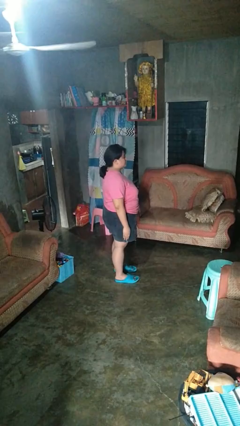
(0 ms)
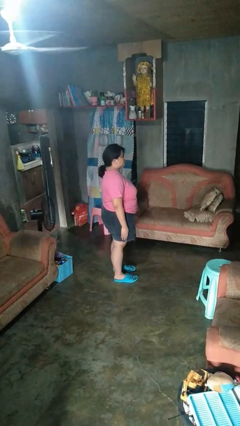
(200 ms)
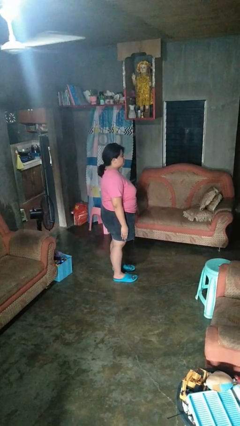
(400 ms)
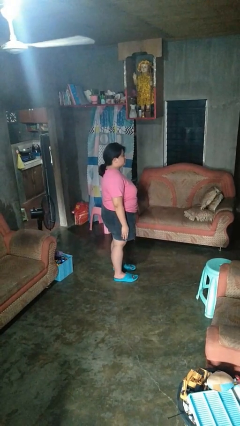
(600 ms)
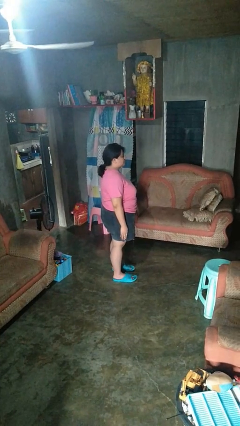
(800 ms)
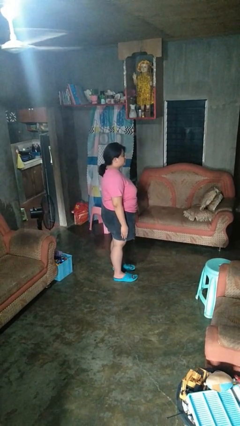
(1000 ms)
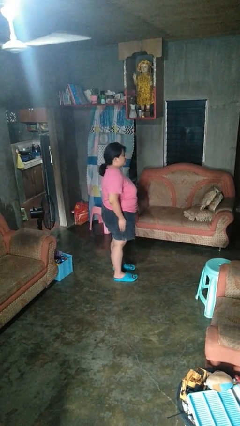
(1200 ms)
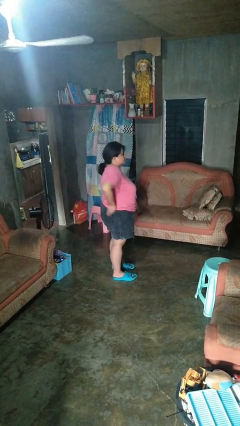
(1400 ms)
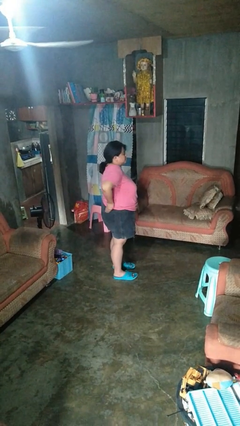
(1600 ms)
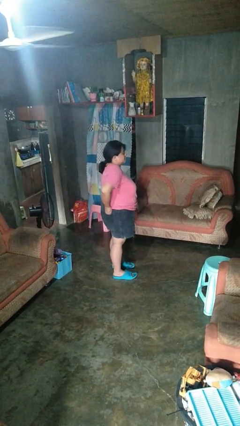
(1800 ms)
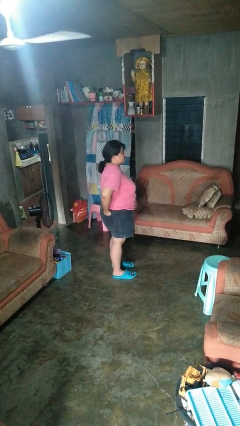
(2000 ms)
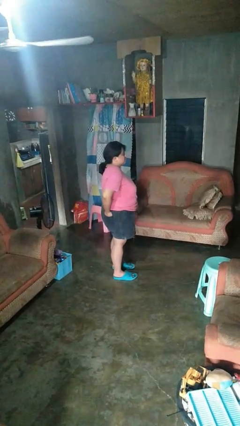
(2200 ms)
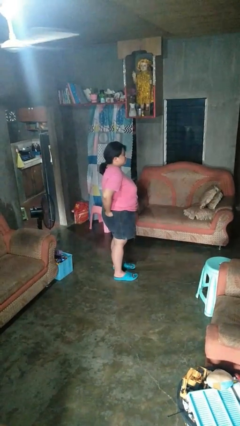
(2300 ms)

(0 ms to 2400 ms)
person puts hands in back pockets

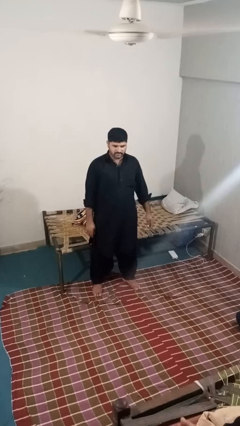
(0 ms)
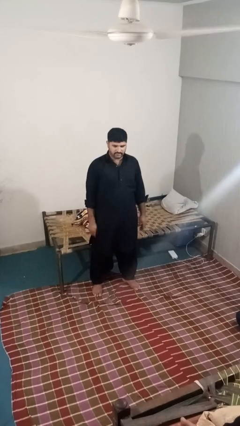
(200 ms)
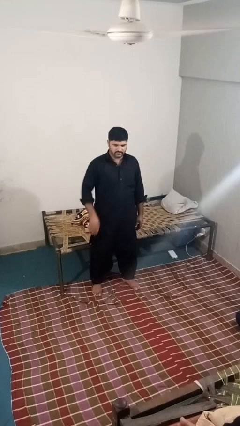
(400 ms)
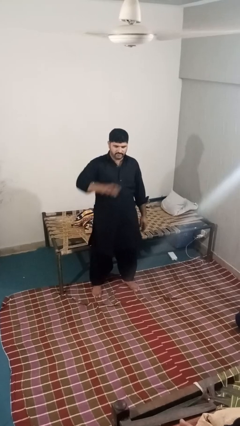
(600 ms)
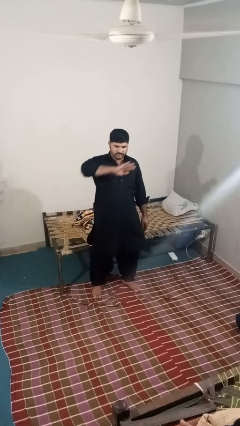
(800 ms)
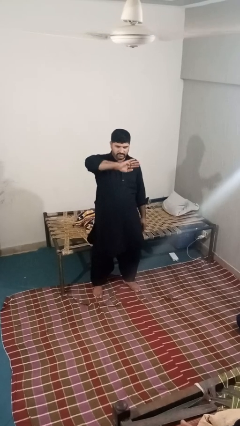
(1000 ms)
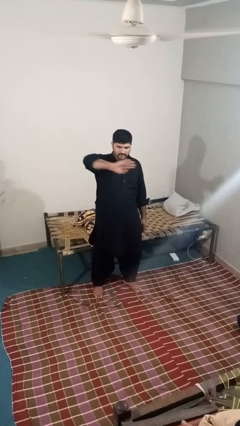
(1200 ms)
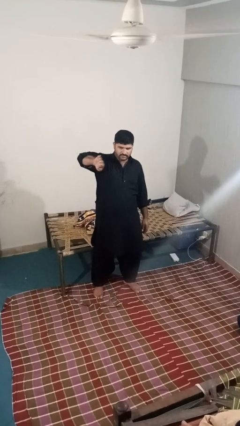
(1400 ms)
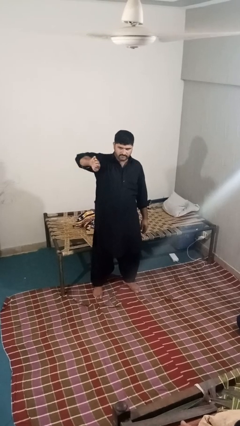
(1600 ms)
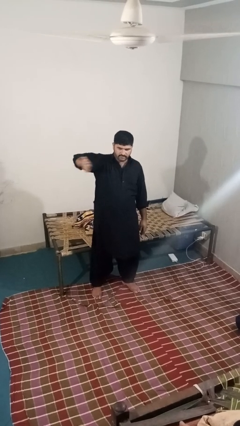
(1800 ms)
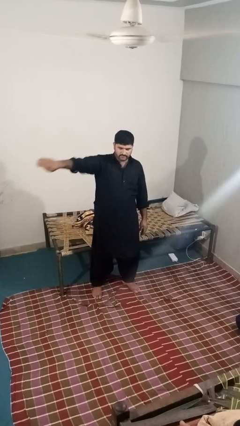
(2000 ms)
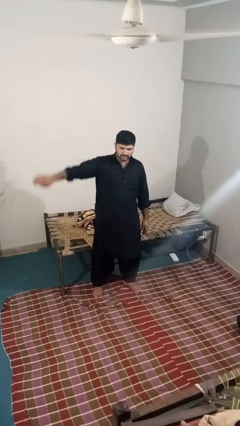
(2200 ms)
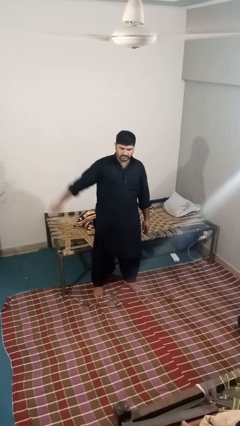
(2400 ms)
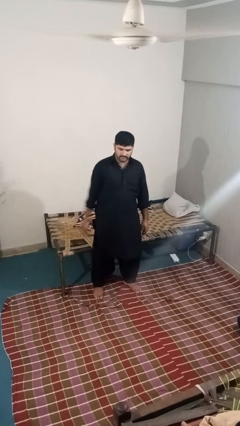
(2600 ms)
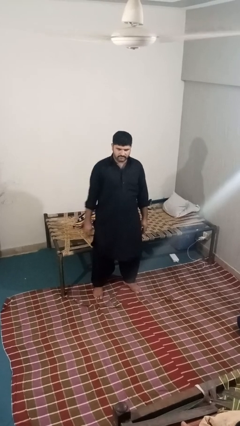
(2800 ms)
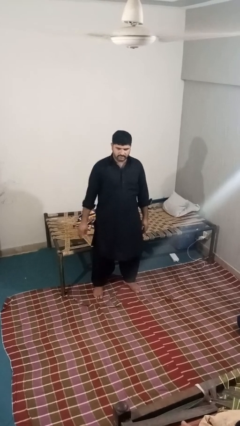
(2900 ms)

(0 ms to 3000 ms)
person gestures swipe right

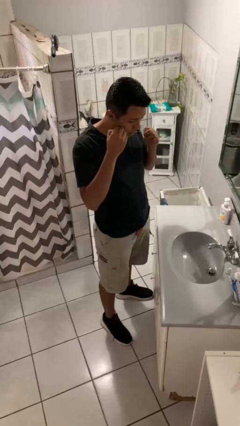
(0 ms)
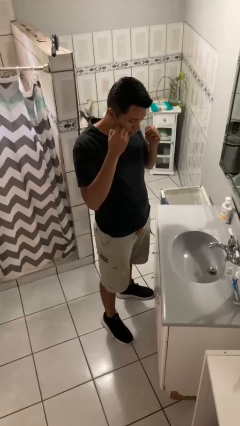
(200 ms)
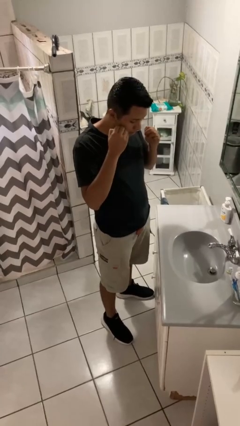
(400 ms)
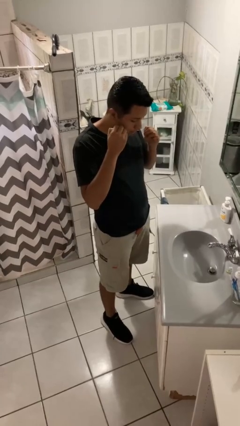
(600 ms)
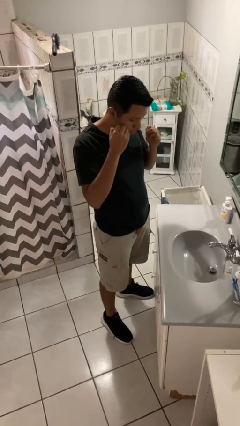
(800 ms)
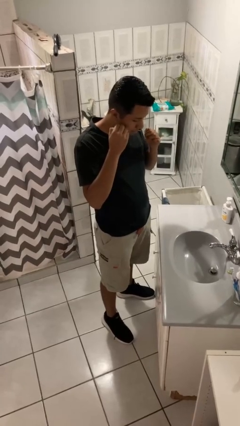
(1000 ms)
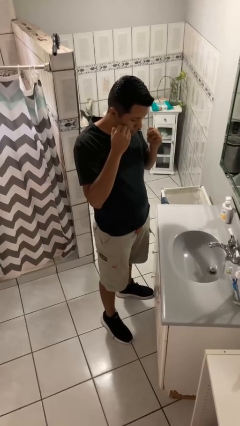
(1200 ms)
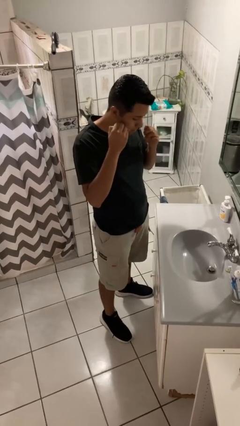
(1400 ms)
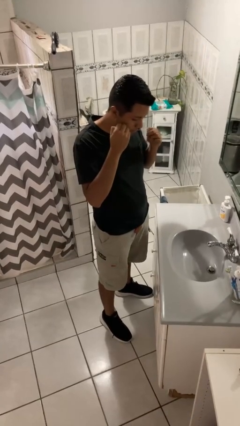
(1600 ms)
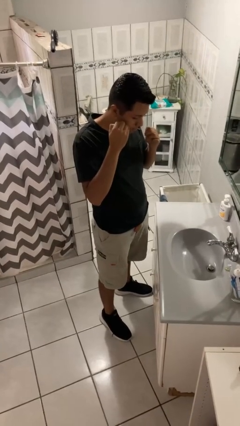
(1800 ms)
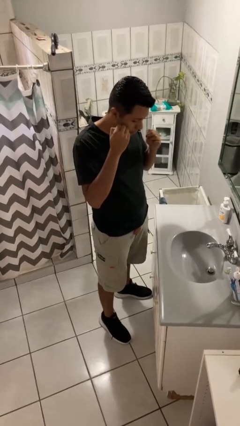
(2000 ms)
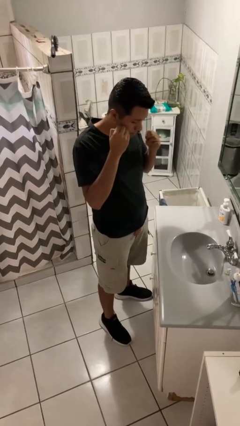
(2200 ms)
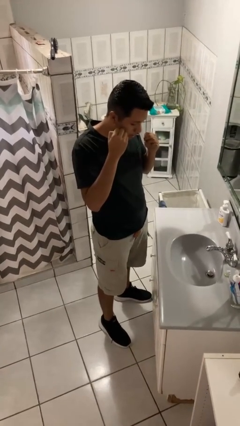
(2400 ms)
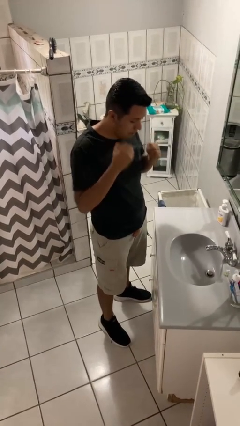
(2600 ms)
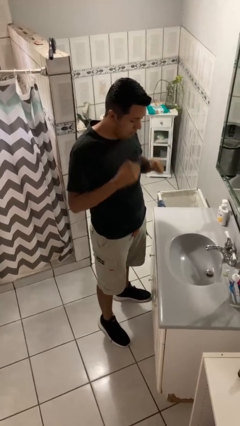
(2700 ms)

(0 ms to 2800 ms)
person flosses

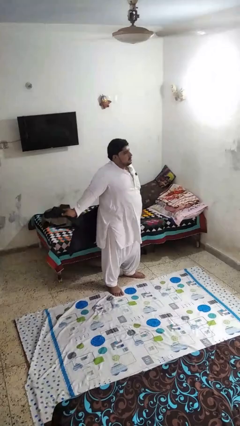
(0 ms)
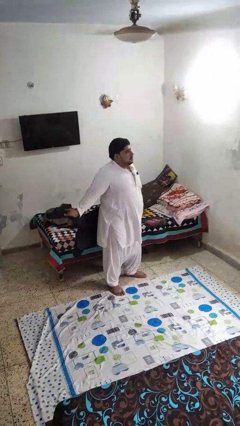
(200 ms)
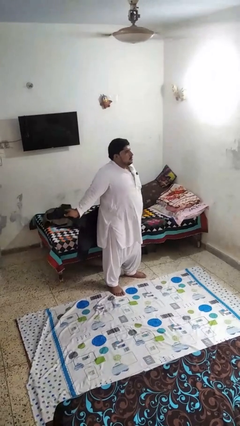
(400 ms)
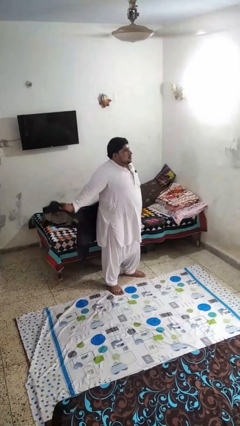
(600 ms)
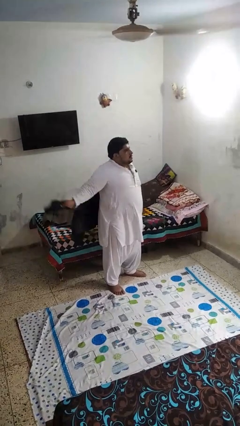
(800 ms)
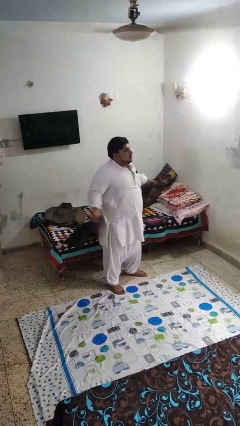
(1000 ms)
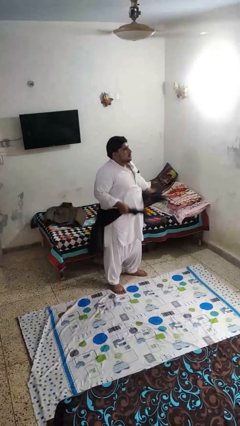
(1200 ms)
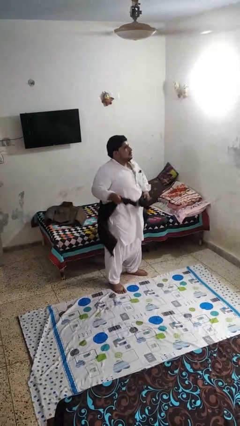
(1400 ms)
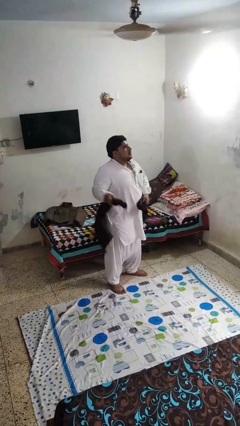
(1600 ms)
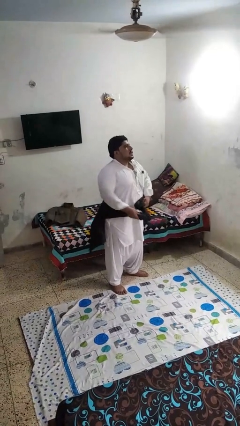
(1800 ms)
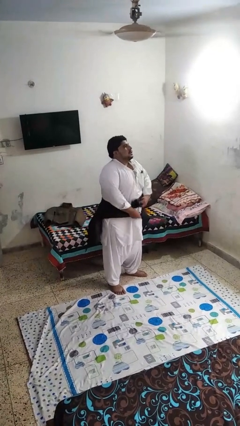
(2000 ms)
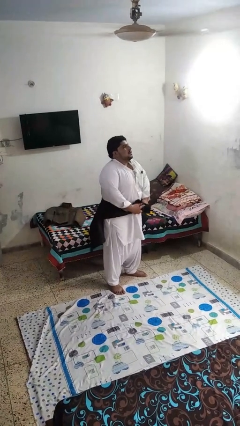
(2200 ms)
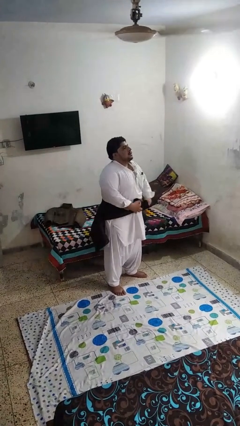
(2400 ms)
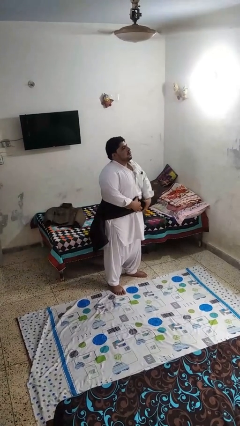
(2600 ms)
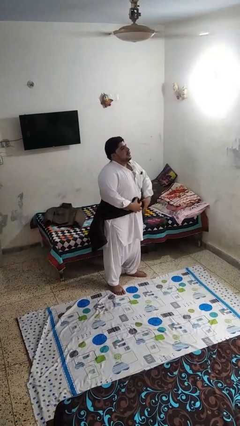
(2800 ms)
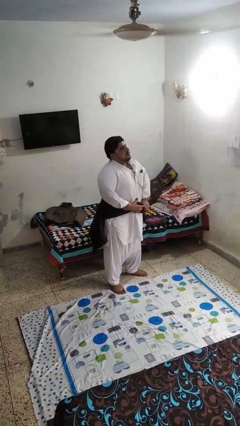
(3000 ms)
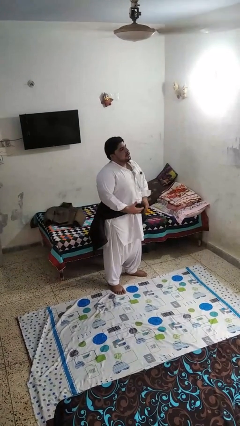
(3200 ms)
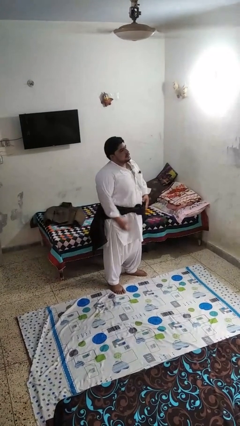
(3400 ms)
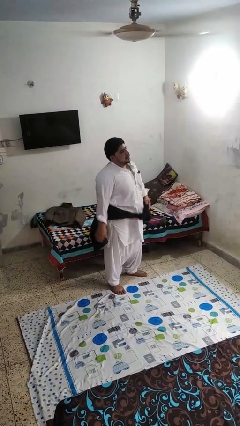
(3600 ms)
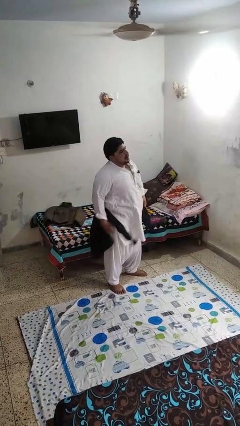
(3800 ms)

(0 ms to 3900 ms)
person ties jacket around waist

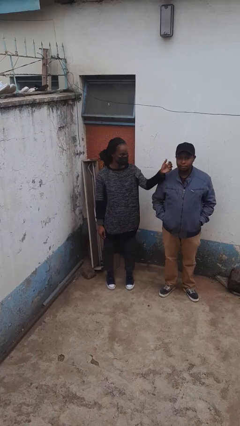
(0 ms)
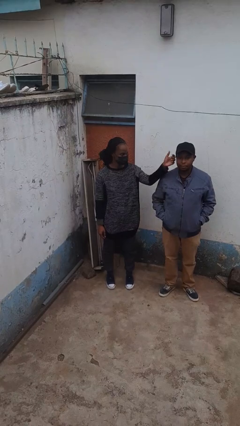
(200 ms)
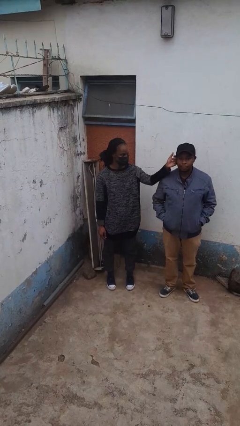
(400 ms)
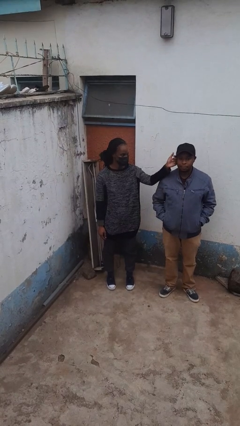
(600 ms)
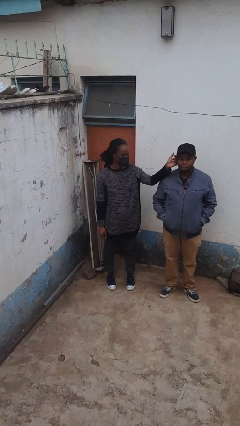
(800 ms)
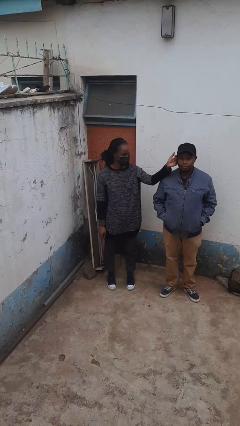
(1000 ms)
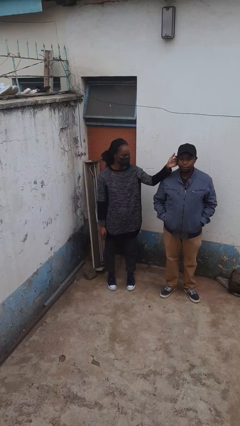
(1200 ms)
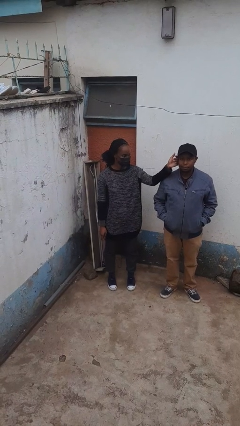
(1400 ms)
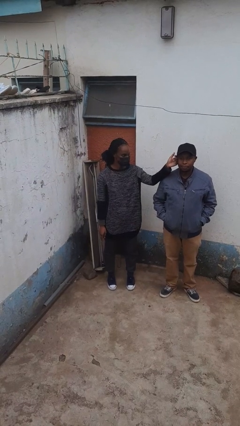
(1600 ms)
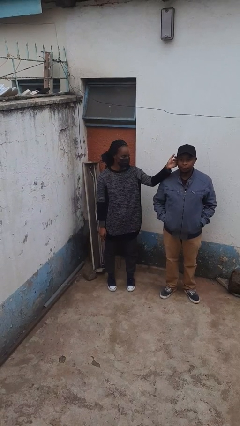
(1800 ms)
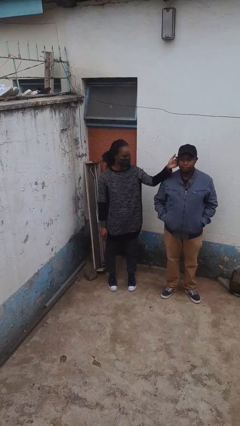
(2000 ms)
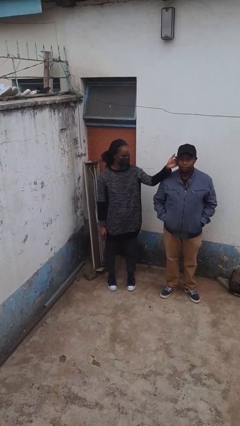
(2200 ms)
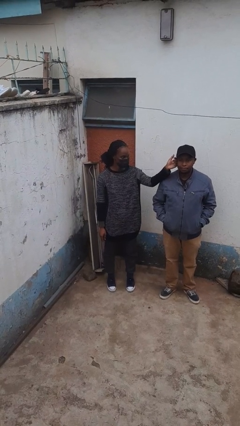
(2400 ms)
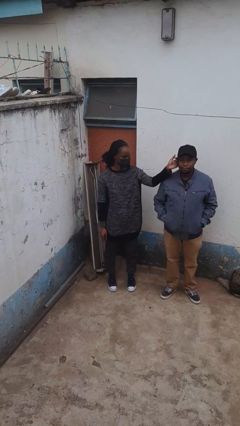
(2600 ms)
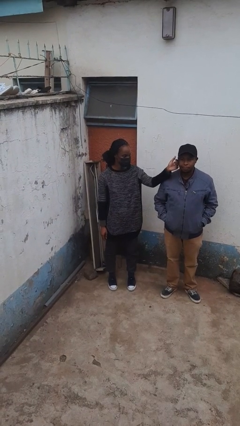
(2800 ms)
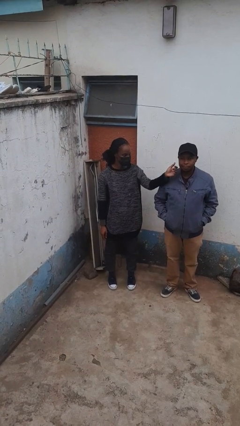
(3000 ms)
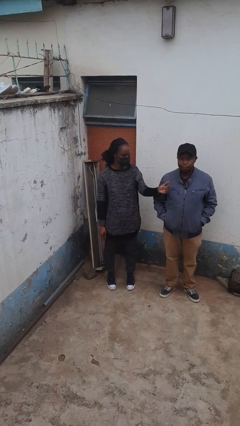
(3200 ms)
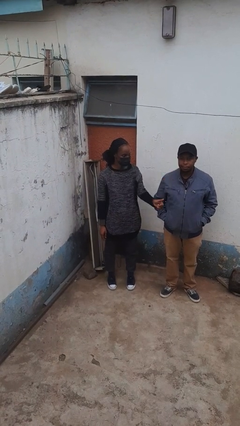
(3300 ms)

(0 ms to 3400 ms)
person touches face of person

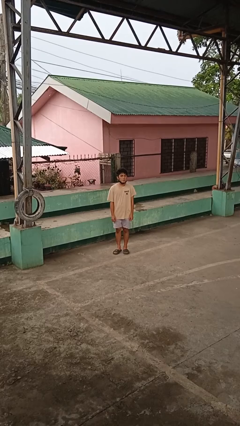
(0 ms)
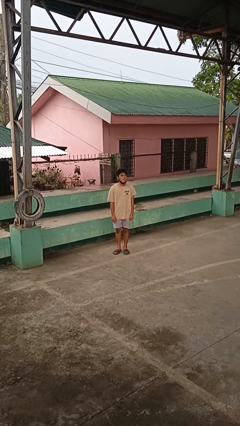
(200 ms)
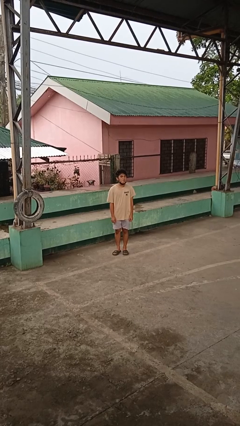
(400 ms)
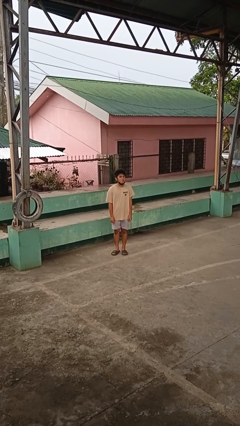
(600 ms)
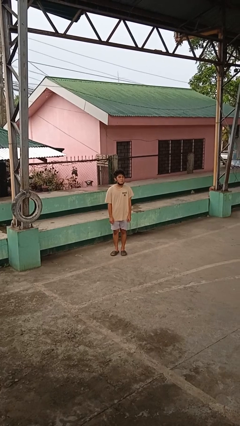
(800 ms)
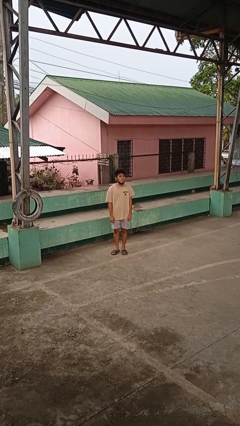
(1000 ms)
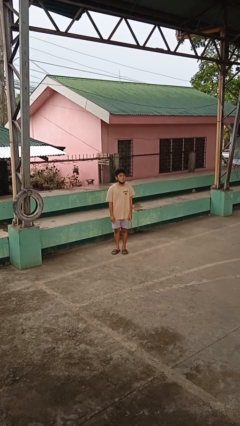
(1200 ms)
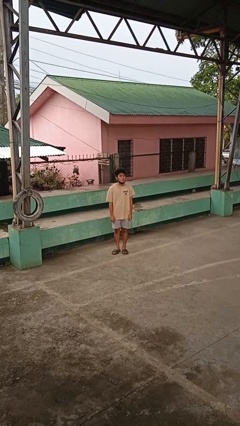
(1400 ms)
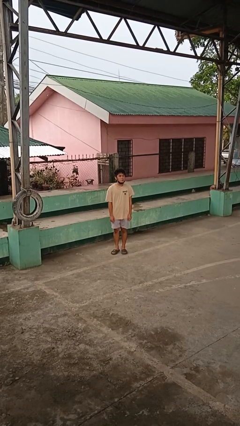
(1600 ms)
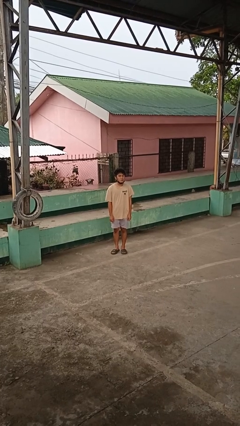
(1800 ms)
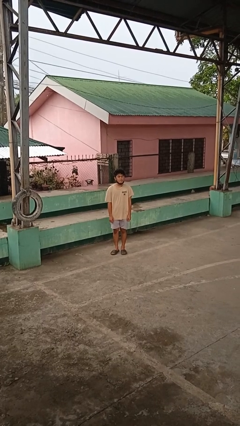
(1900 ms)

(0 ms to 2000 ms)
person sticks out tongue
